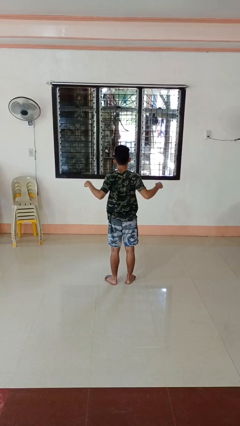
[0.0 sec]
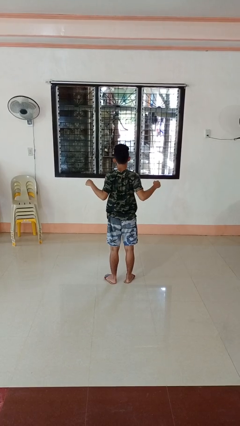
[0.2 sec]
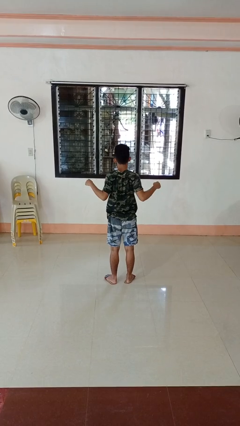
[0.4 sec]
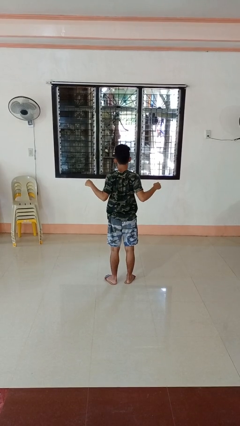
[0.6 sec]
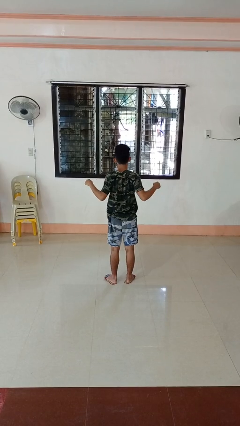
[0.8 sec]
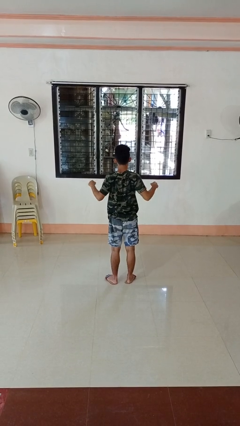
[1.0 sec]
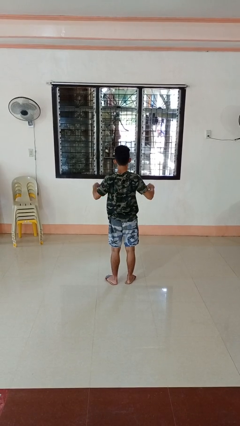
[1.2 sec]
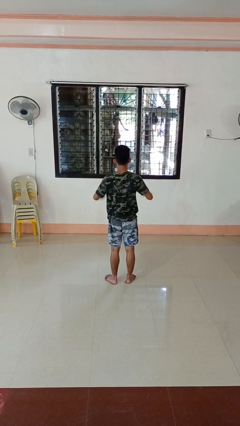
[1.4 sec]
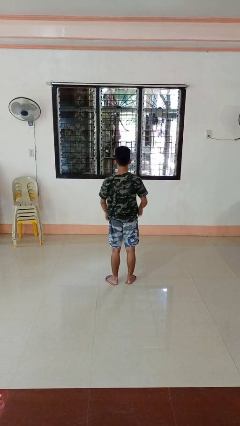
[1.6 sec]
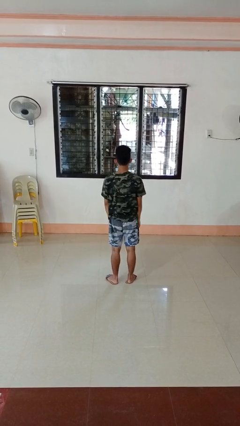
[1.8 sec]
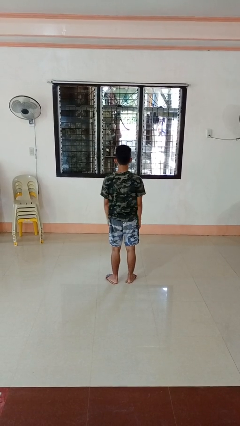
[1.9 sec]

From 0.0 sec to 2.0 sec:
person stretches back

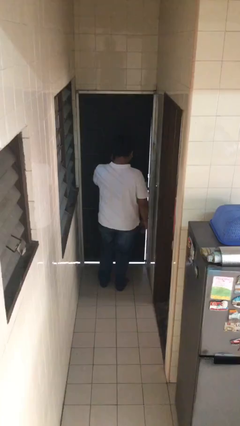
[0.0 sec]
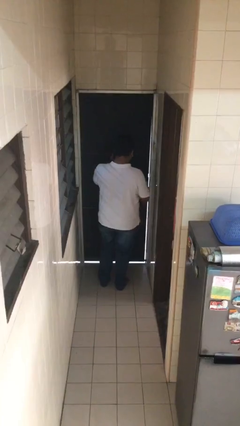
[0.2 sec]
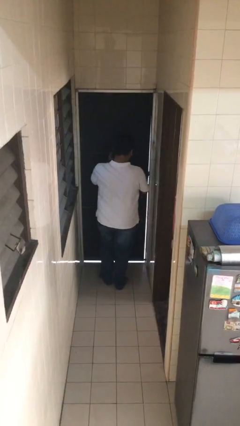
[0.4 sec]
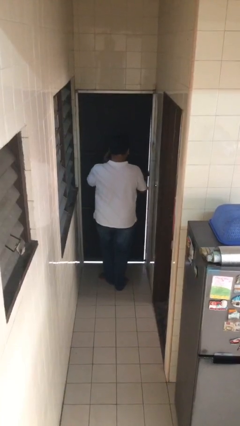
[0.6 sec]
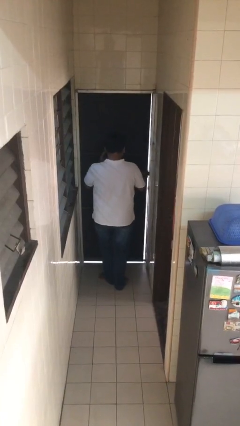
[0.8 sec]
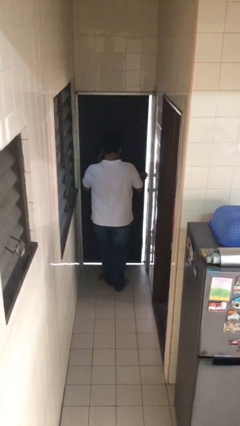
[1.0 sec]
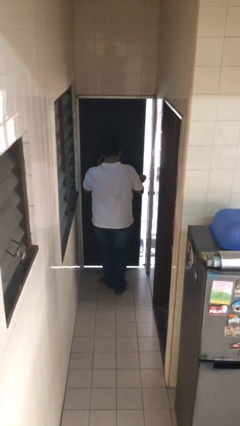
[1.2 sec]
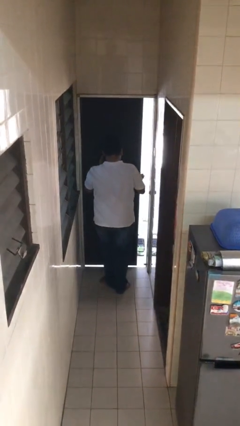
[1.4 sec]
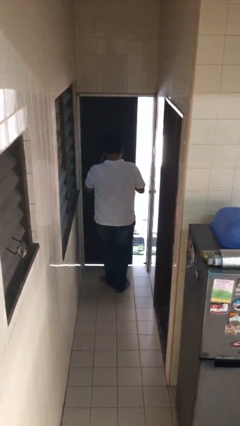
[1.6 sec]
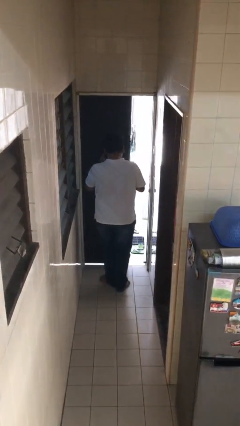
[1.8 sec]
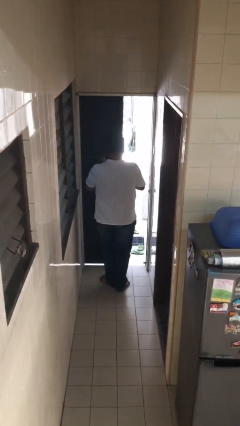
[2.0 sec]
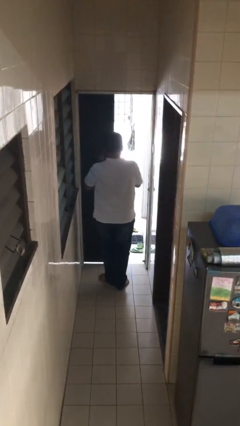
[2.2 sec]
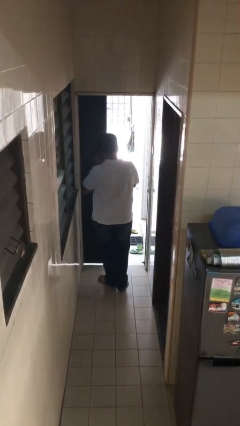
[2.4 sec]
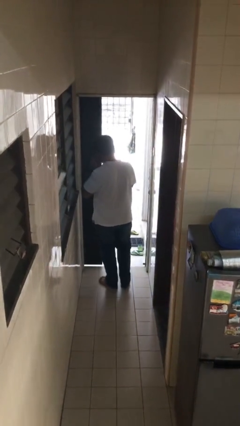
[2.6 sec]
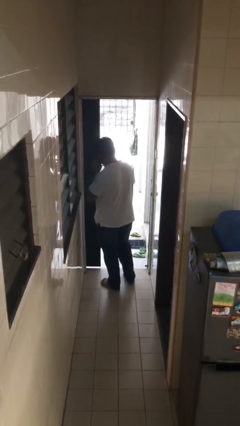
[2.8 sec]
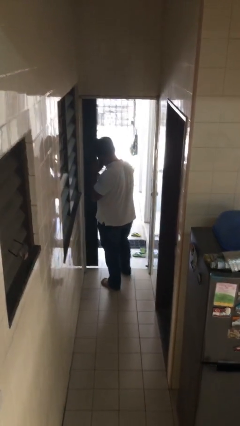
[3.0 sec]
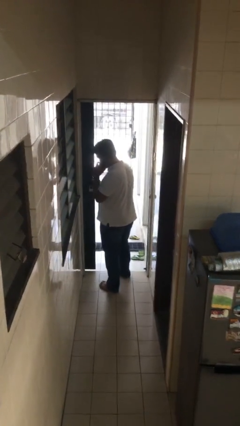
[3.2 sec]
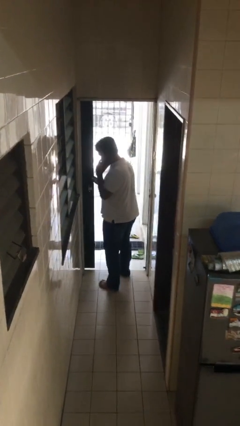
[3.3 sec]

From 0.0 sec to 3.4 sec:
person opens facility door

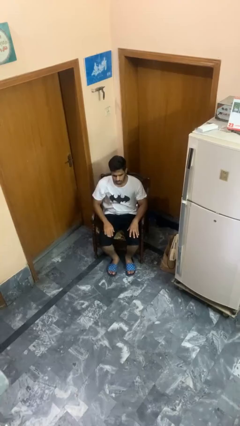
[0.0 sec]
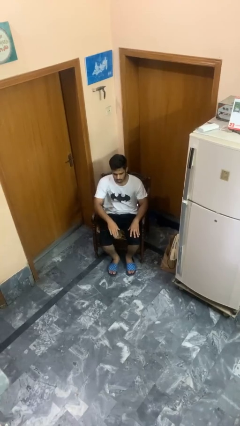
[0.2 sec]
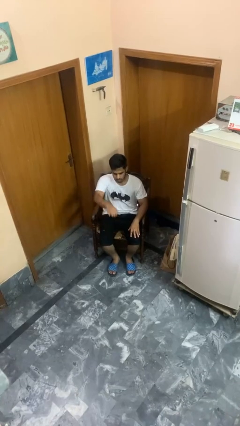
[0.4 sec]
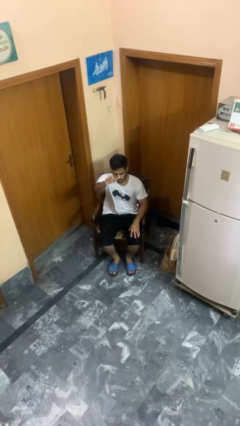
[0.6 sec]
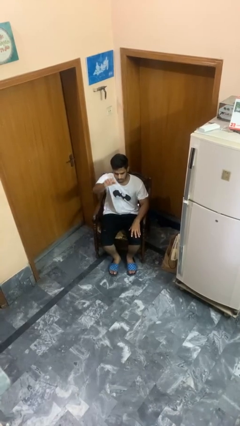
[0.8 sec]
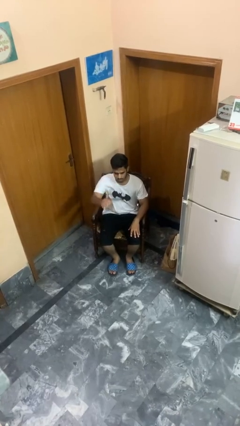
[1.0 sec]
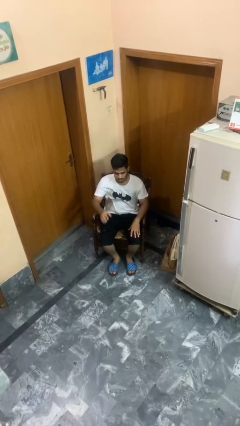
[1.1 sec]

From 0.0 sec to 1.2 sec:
person gestures swipe up

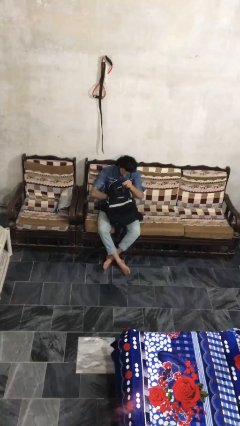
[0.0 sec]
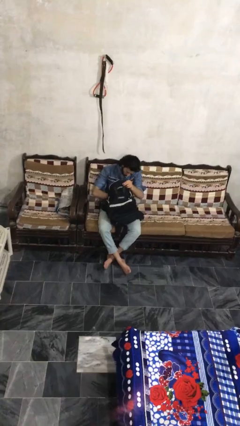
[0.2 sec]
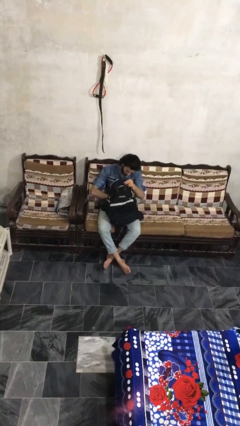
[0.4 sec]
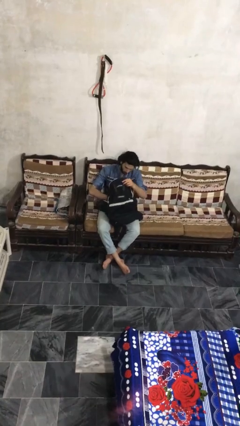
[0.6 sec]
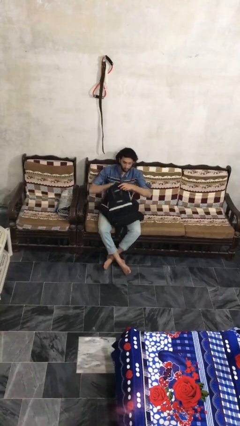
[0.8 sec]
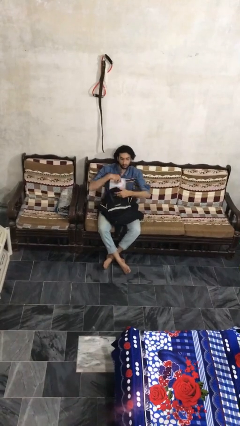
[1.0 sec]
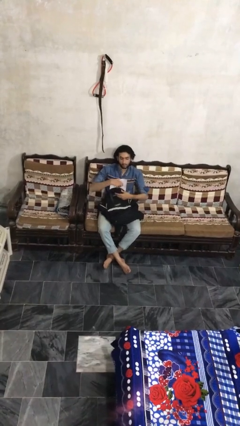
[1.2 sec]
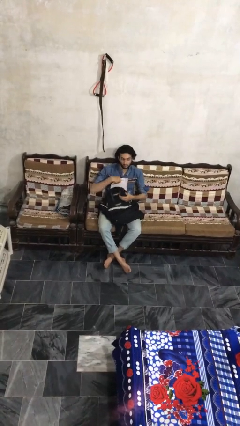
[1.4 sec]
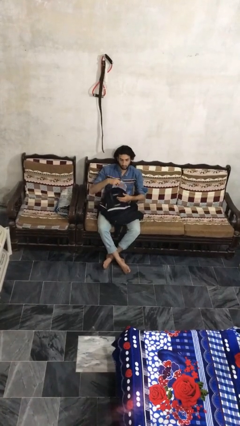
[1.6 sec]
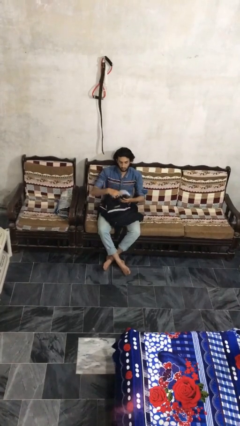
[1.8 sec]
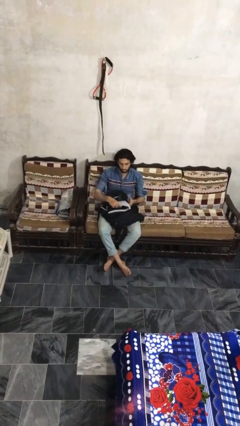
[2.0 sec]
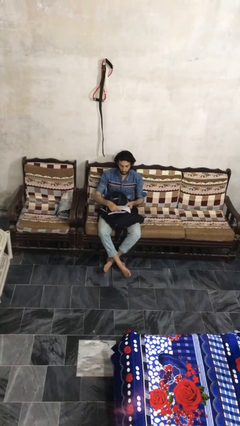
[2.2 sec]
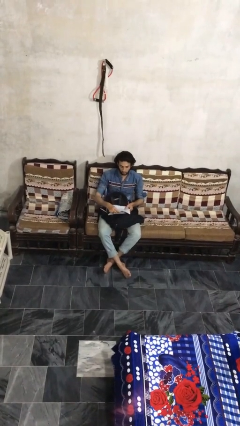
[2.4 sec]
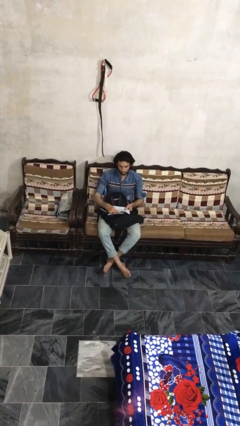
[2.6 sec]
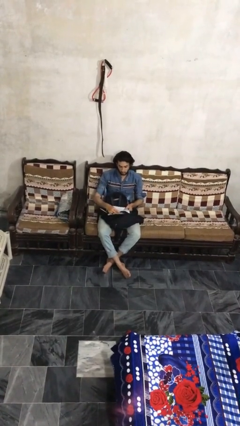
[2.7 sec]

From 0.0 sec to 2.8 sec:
person takes object from backpack

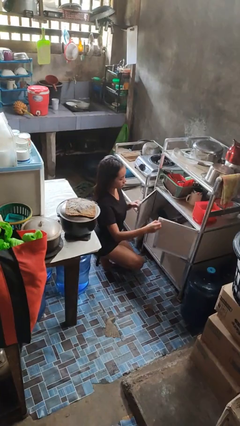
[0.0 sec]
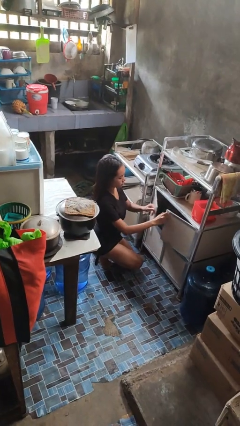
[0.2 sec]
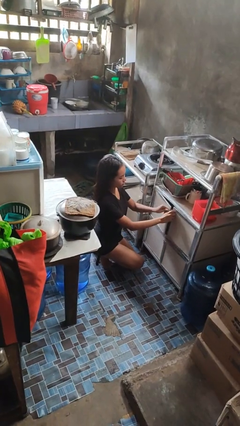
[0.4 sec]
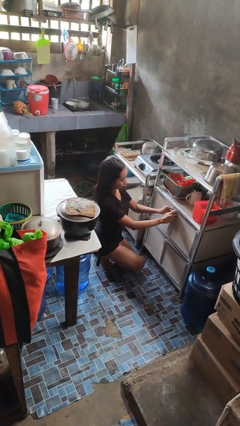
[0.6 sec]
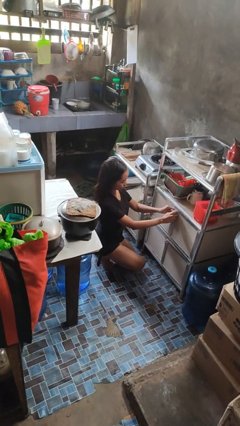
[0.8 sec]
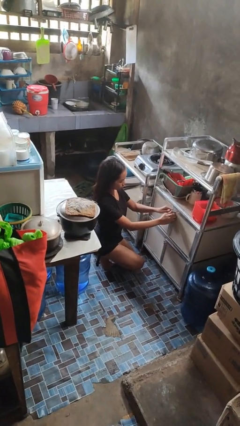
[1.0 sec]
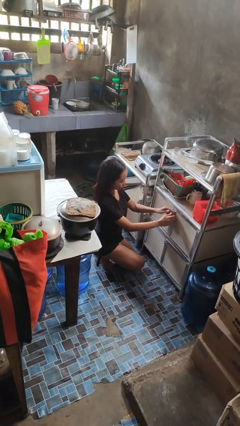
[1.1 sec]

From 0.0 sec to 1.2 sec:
person closes cabinet

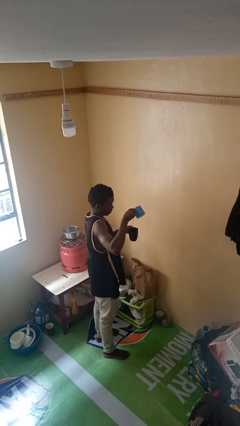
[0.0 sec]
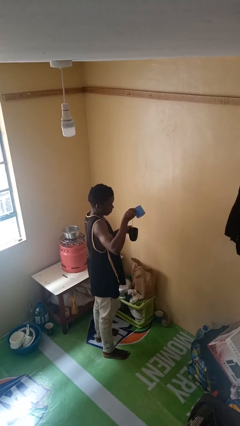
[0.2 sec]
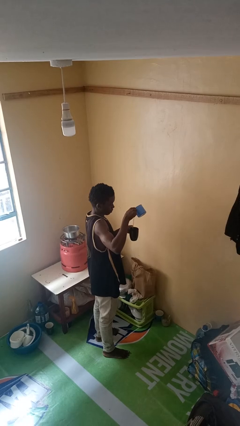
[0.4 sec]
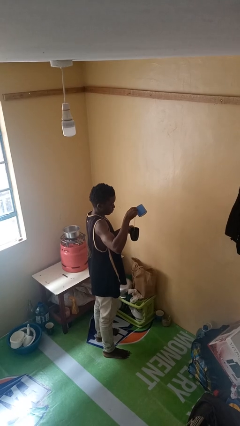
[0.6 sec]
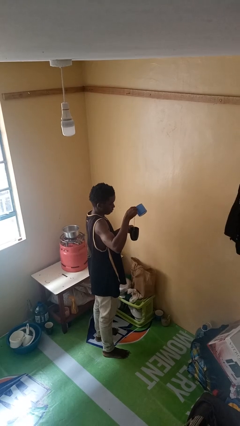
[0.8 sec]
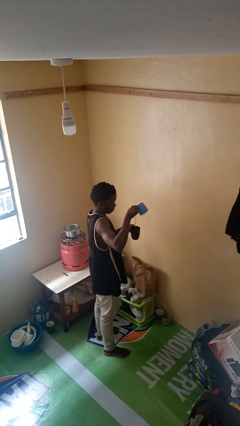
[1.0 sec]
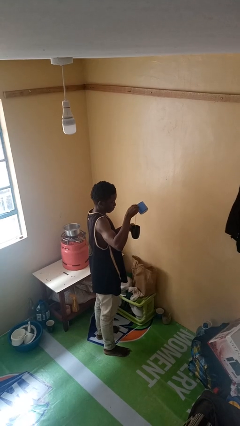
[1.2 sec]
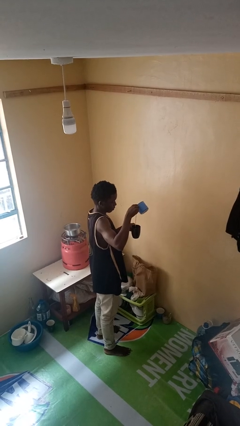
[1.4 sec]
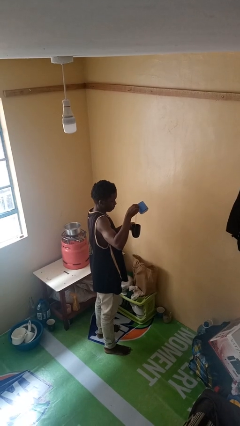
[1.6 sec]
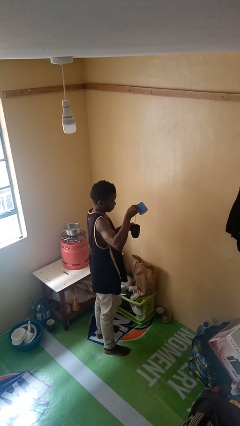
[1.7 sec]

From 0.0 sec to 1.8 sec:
person pours coffee into mug

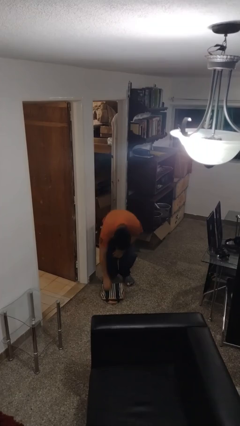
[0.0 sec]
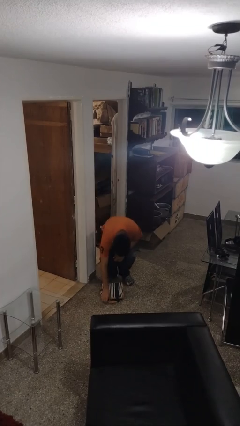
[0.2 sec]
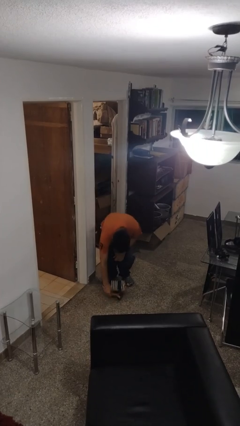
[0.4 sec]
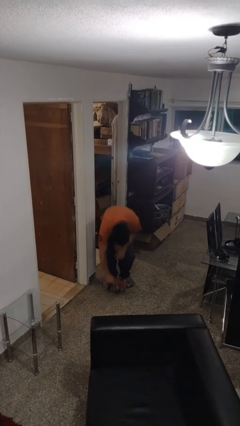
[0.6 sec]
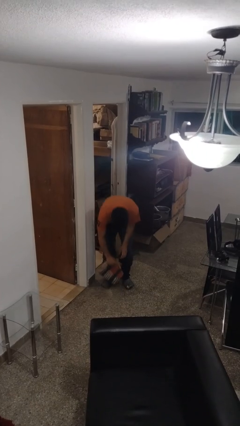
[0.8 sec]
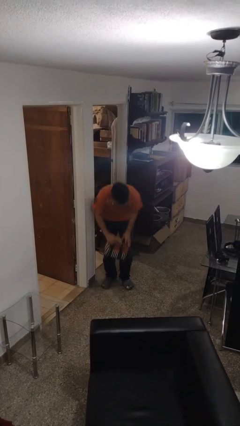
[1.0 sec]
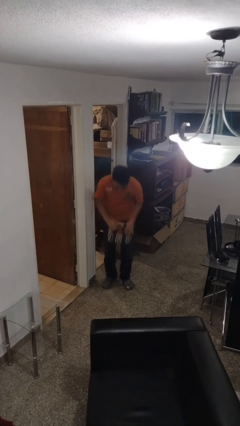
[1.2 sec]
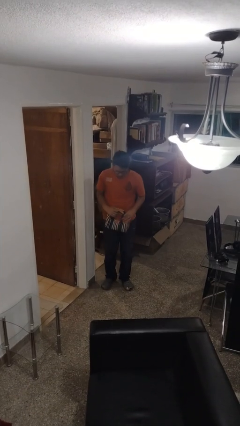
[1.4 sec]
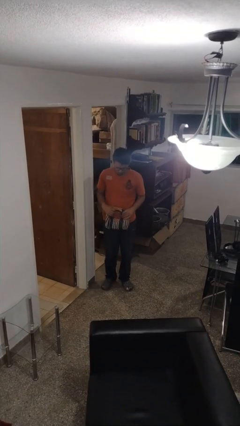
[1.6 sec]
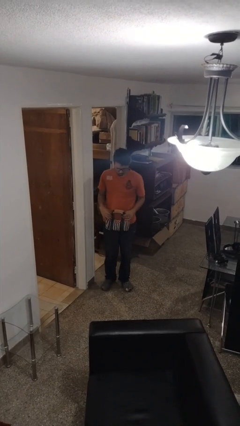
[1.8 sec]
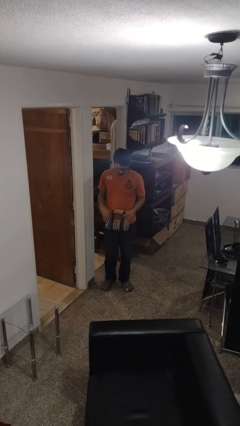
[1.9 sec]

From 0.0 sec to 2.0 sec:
person picks up object from floor

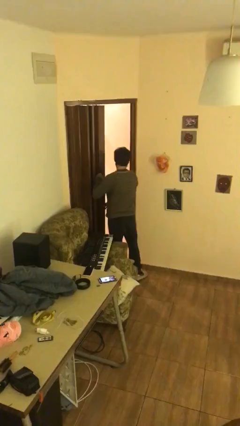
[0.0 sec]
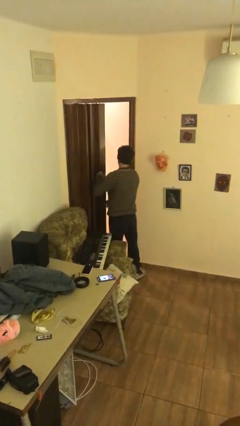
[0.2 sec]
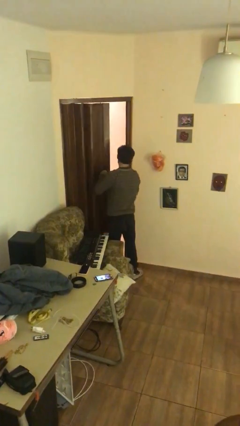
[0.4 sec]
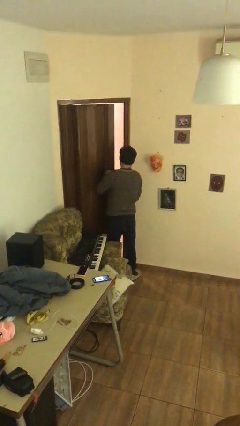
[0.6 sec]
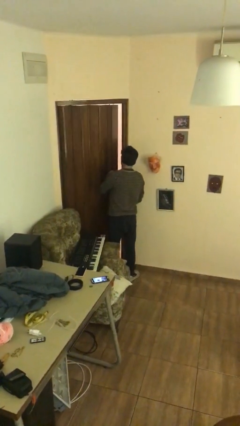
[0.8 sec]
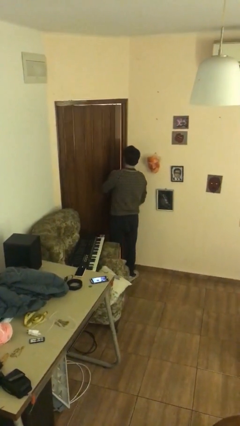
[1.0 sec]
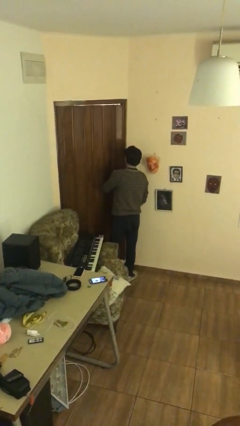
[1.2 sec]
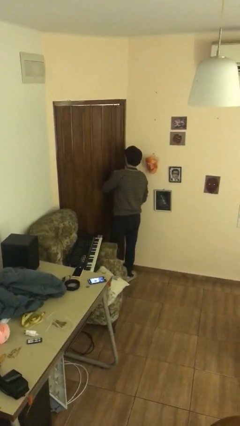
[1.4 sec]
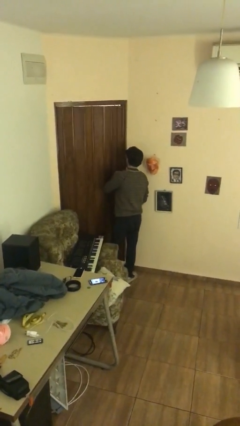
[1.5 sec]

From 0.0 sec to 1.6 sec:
person closes sliding door

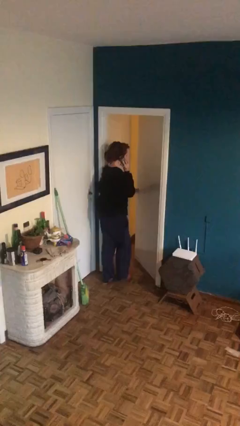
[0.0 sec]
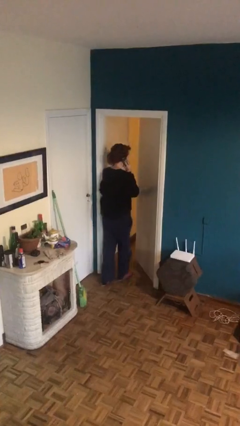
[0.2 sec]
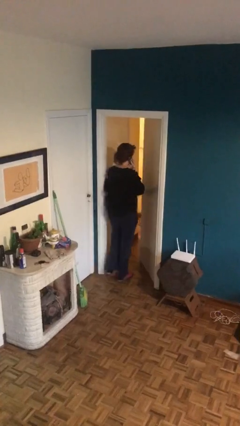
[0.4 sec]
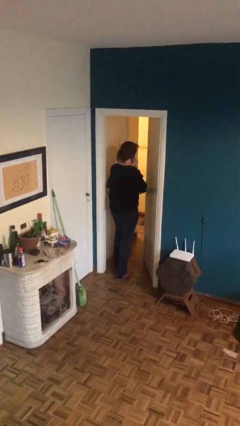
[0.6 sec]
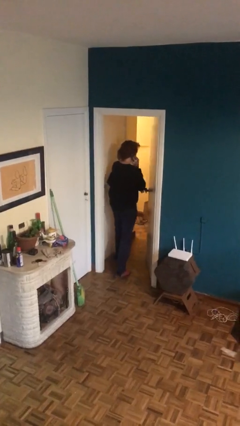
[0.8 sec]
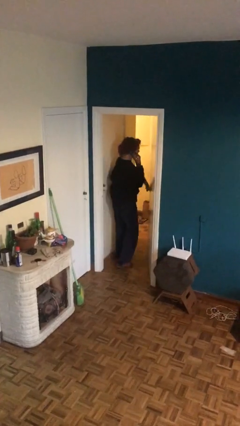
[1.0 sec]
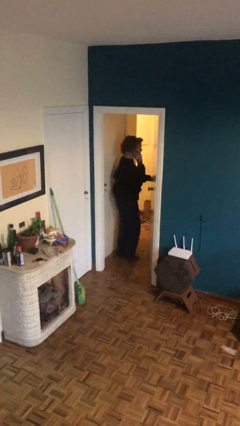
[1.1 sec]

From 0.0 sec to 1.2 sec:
person exits scene through structure
